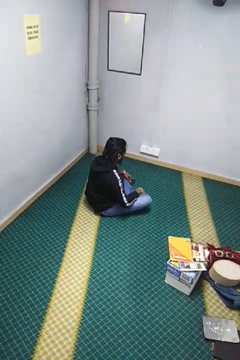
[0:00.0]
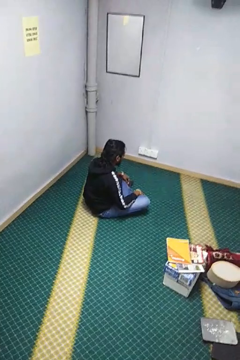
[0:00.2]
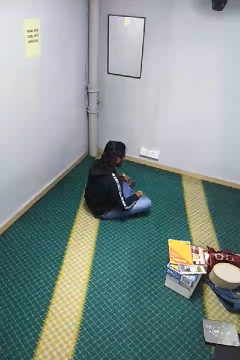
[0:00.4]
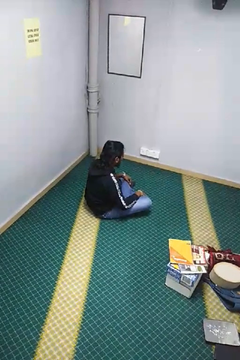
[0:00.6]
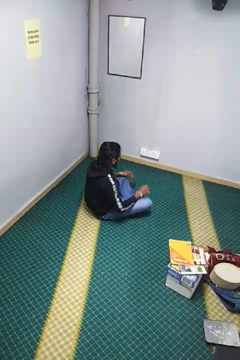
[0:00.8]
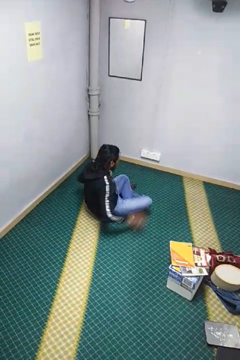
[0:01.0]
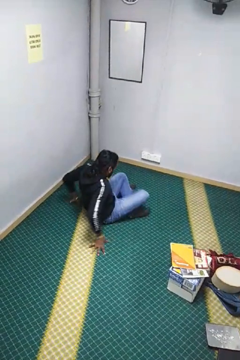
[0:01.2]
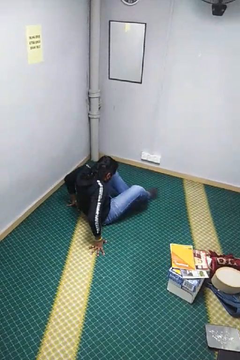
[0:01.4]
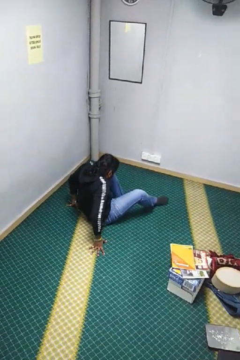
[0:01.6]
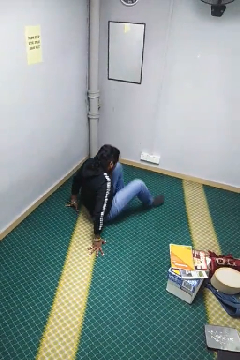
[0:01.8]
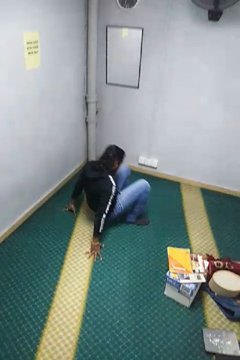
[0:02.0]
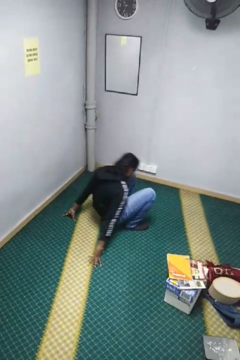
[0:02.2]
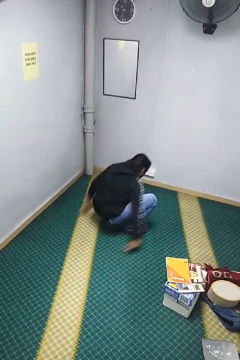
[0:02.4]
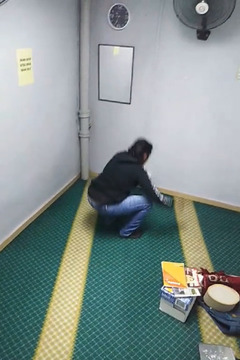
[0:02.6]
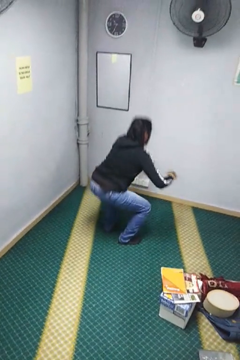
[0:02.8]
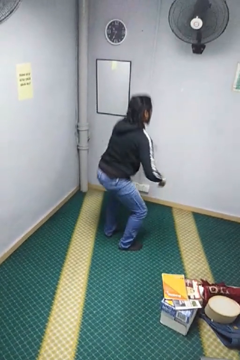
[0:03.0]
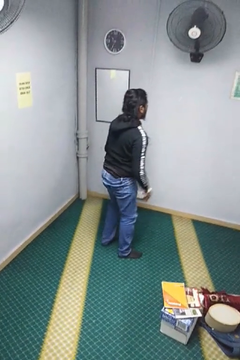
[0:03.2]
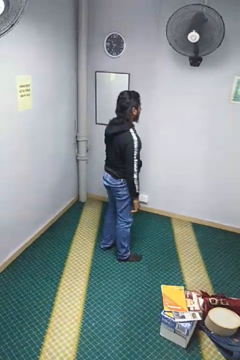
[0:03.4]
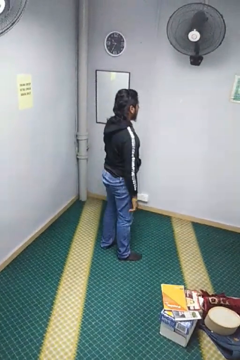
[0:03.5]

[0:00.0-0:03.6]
person stands up from floor

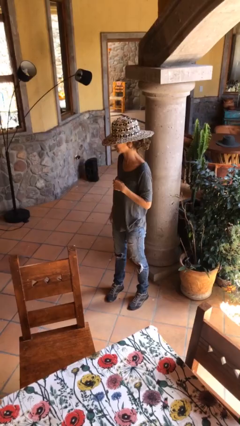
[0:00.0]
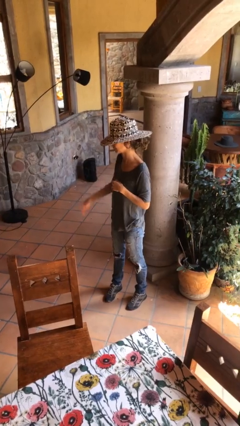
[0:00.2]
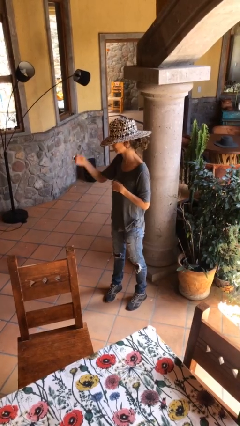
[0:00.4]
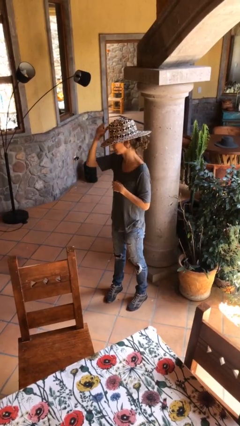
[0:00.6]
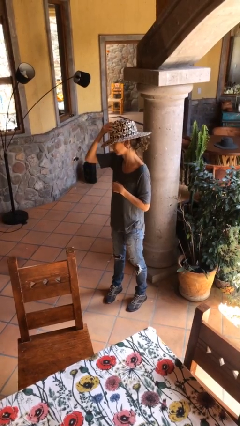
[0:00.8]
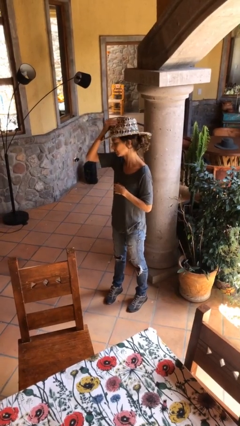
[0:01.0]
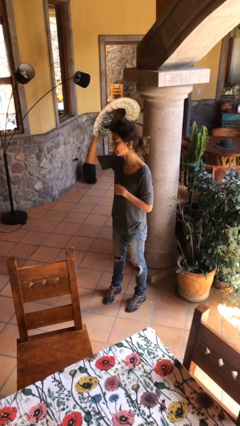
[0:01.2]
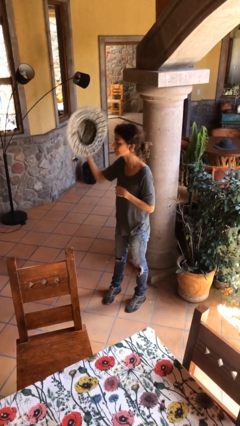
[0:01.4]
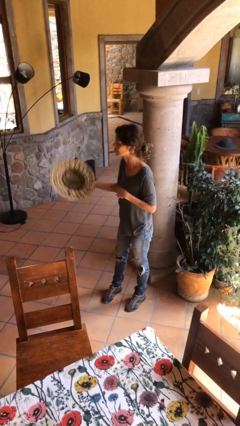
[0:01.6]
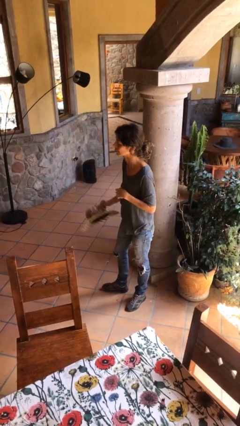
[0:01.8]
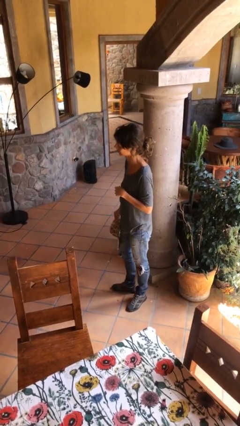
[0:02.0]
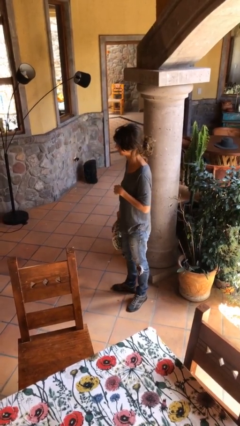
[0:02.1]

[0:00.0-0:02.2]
person takes off hat

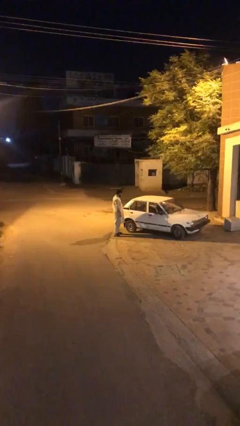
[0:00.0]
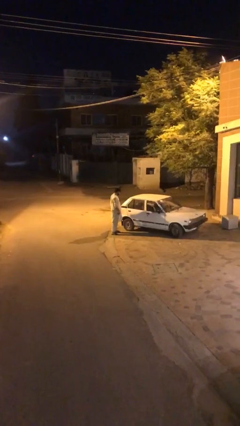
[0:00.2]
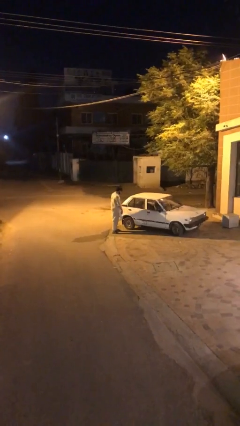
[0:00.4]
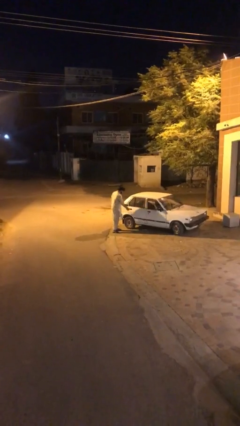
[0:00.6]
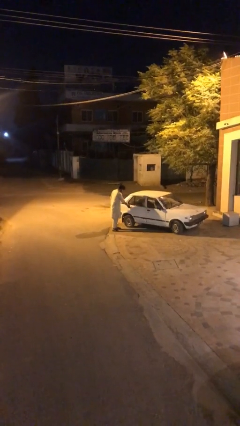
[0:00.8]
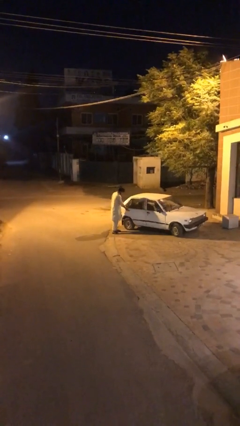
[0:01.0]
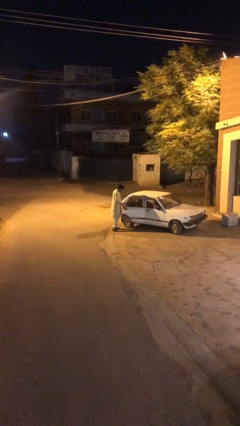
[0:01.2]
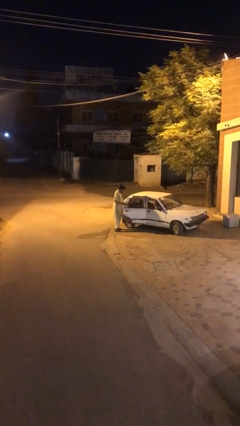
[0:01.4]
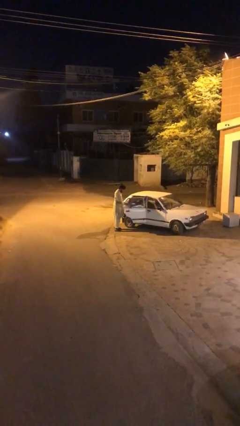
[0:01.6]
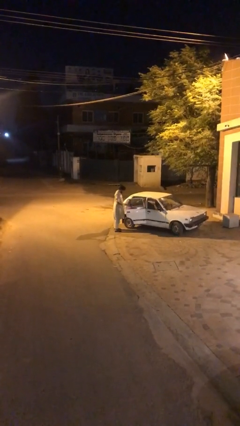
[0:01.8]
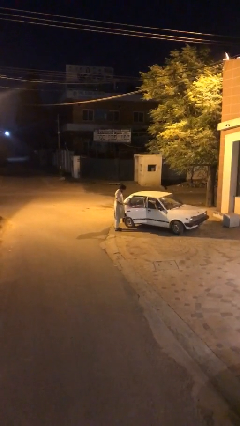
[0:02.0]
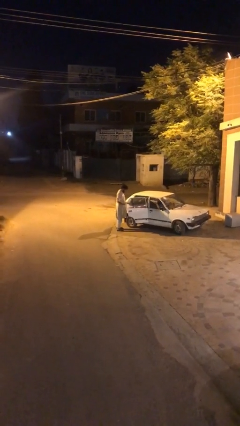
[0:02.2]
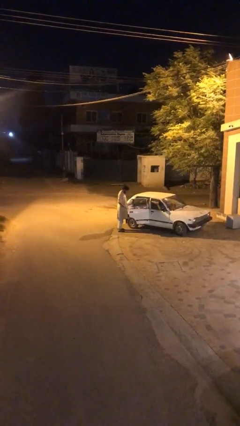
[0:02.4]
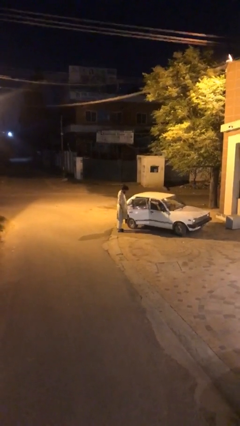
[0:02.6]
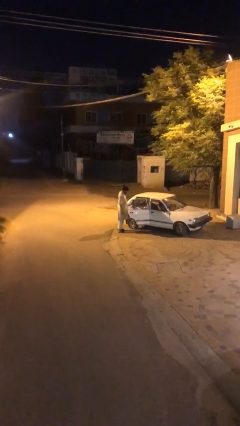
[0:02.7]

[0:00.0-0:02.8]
person opens car door

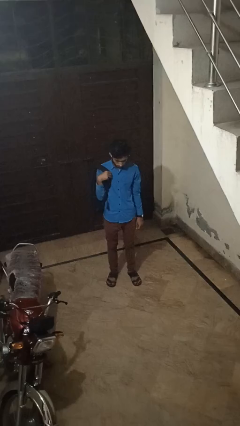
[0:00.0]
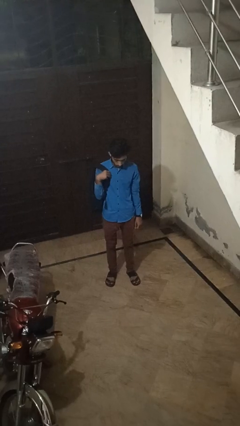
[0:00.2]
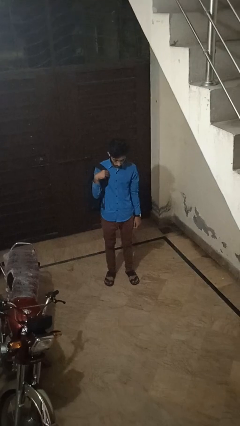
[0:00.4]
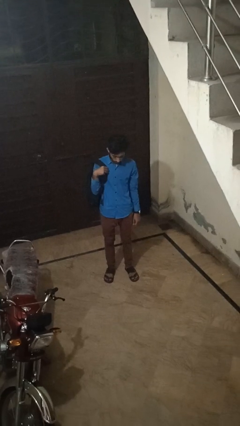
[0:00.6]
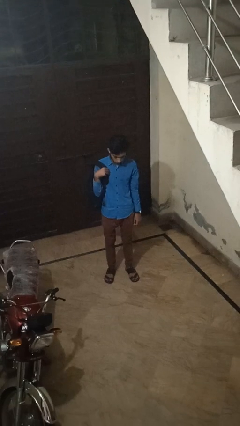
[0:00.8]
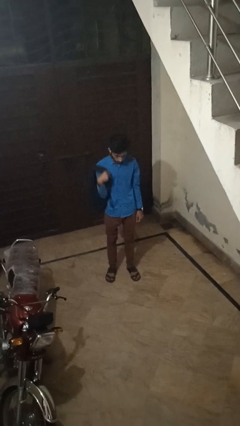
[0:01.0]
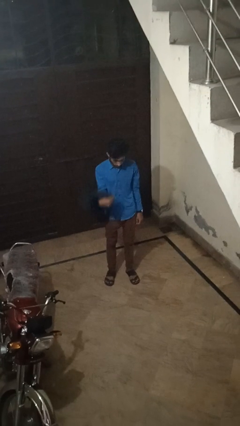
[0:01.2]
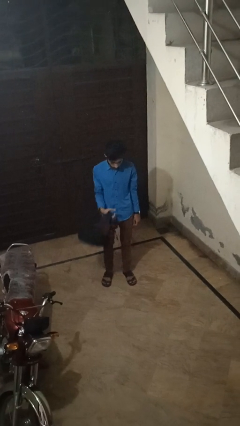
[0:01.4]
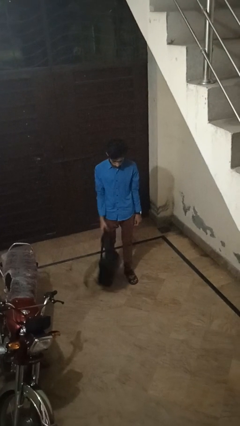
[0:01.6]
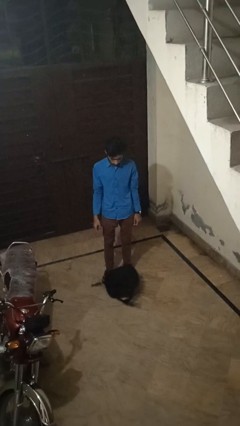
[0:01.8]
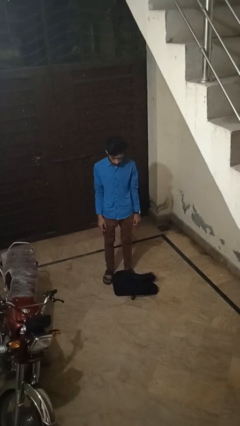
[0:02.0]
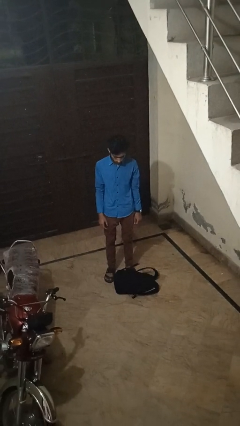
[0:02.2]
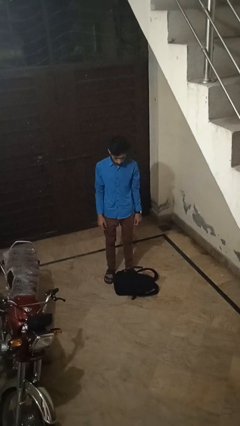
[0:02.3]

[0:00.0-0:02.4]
person drops object

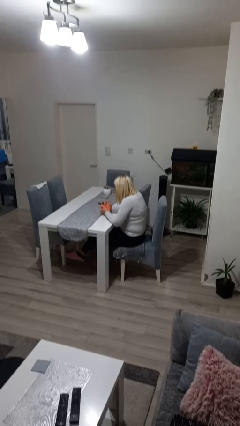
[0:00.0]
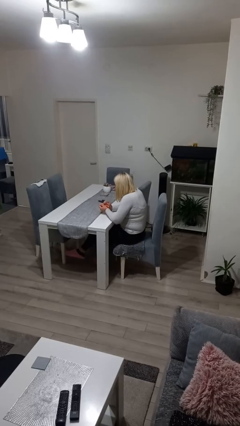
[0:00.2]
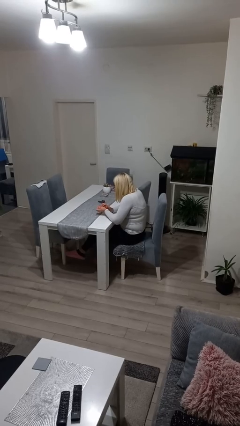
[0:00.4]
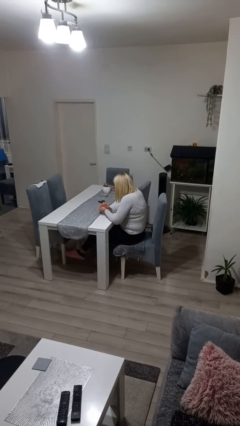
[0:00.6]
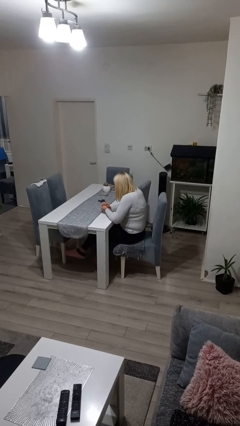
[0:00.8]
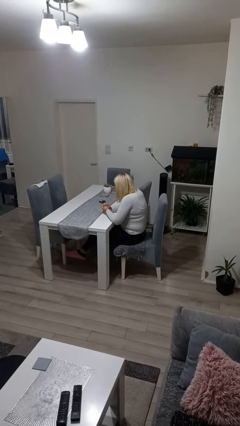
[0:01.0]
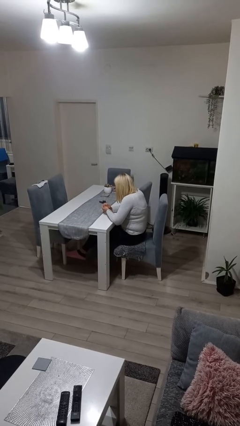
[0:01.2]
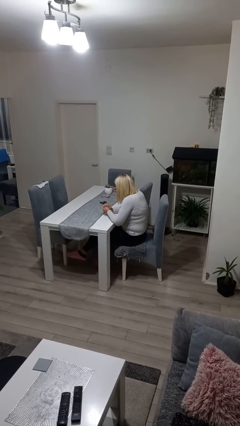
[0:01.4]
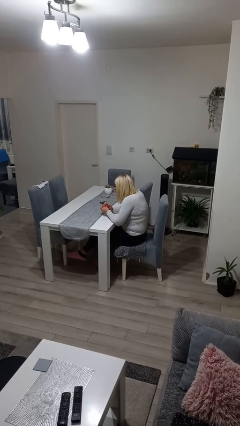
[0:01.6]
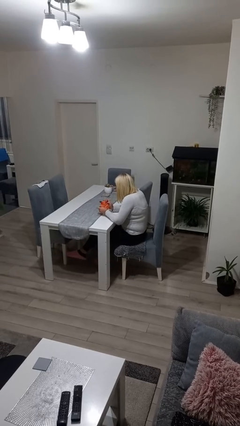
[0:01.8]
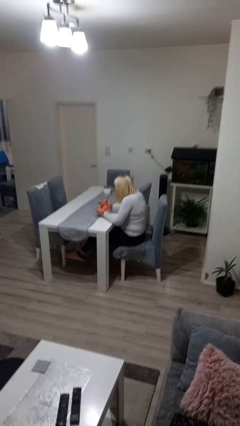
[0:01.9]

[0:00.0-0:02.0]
person crumples paper

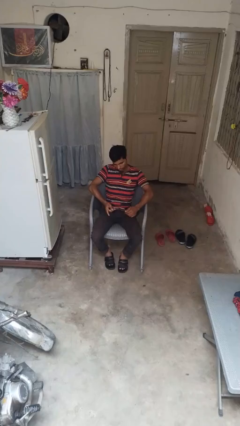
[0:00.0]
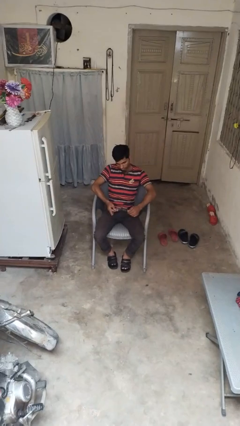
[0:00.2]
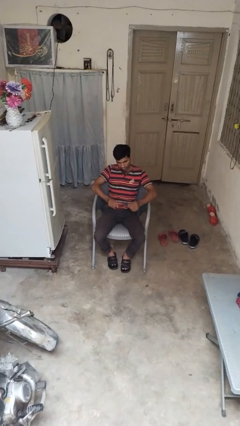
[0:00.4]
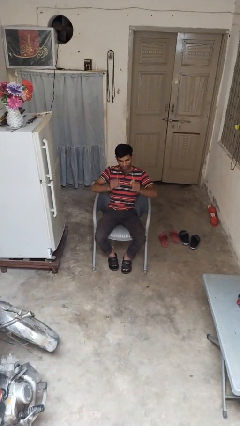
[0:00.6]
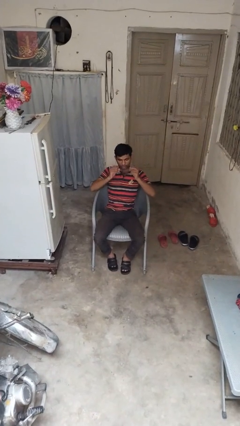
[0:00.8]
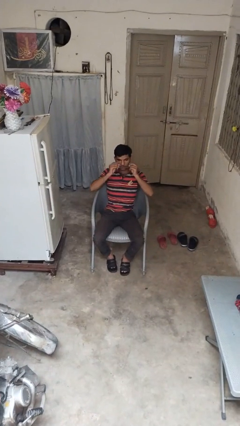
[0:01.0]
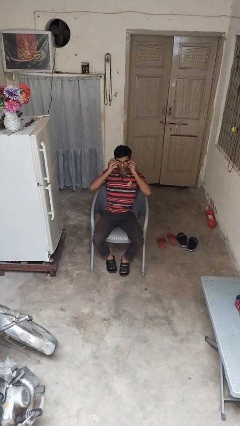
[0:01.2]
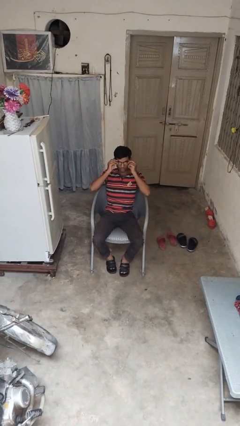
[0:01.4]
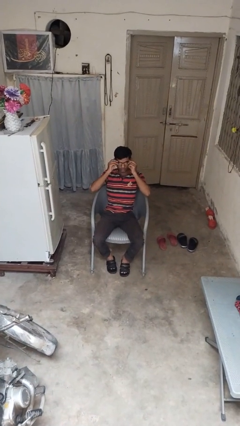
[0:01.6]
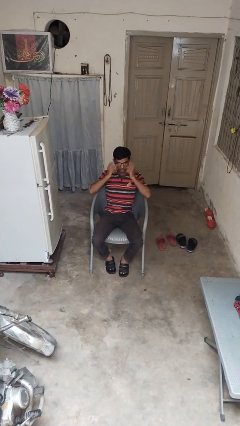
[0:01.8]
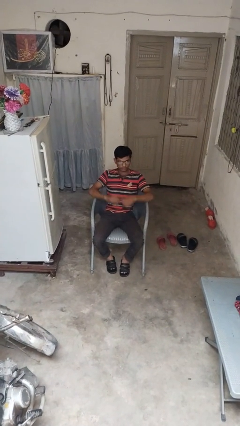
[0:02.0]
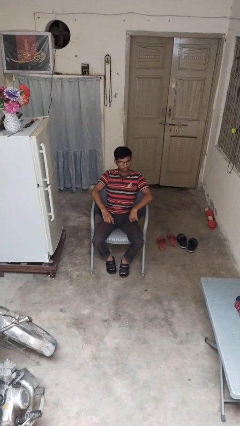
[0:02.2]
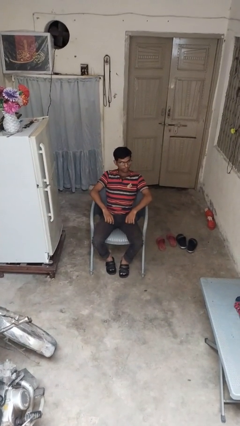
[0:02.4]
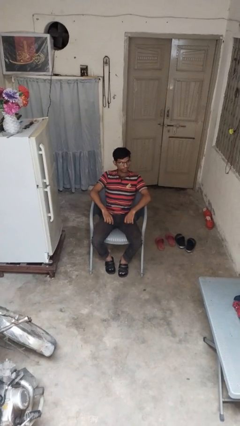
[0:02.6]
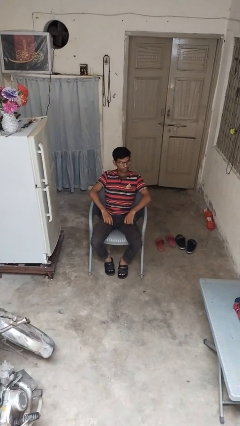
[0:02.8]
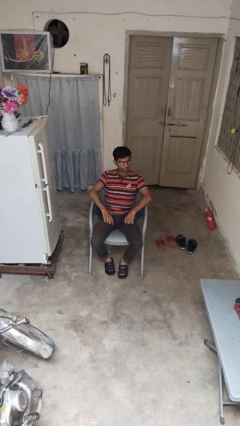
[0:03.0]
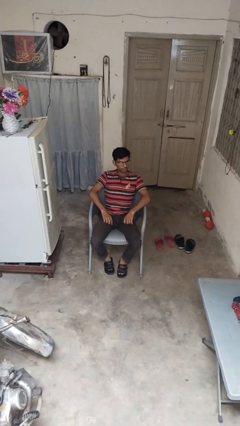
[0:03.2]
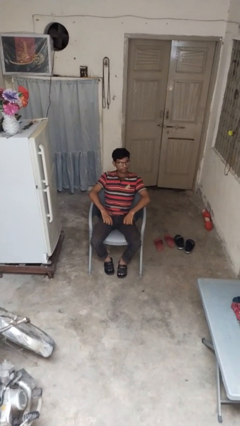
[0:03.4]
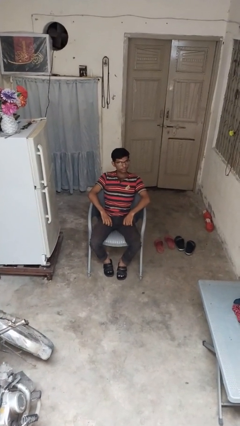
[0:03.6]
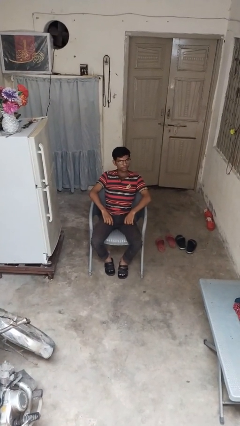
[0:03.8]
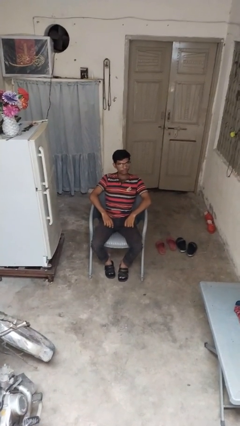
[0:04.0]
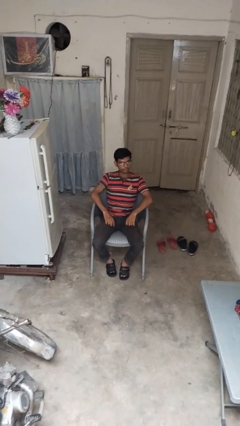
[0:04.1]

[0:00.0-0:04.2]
person puts on glasses

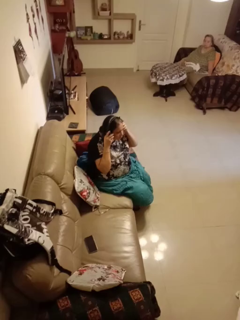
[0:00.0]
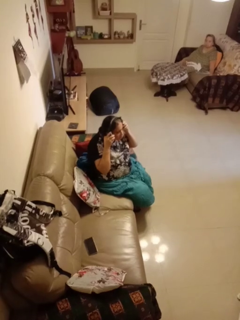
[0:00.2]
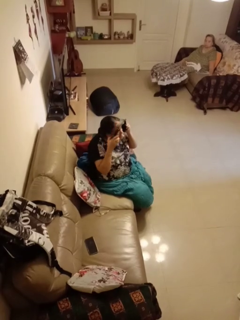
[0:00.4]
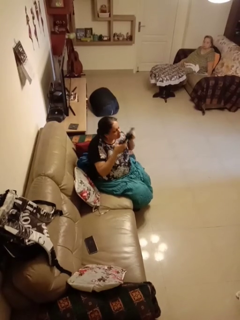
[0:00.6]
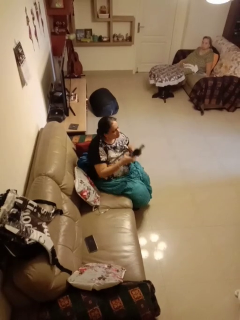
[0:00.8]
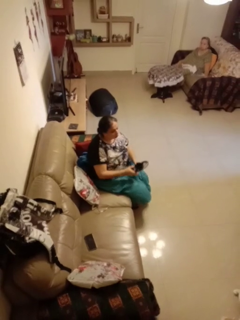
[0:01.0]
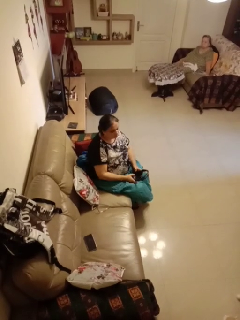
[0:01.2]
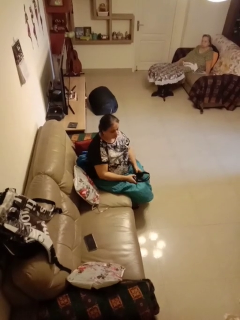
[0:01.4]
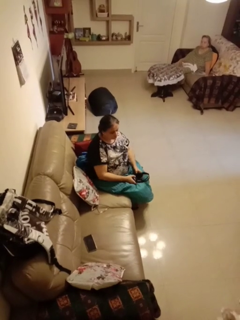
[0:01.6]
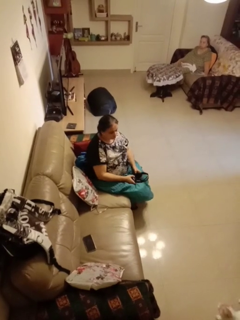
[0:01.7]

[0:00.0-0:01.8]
person takes off headphones
